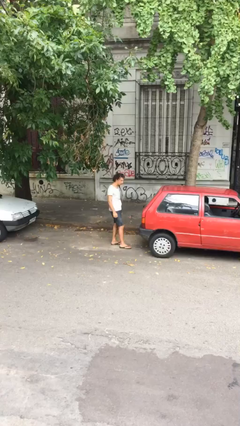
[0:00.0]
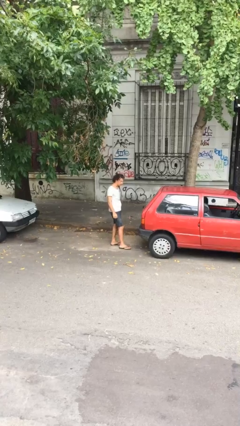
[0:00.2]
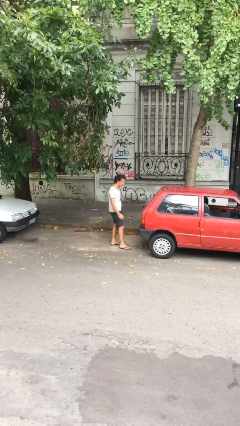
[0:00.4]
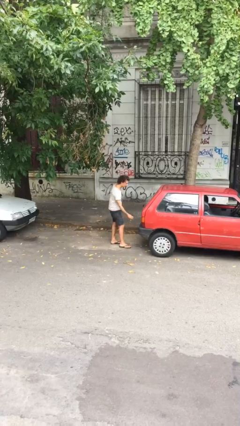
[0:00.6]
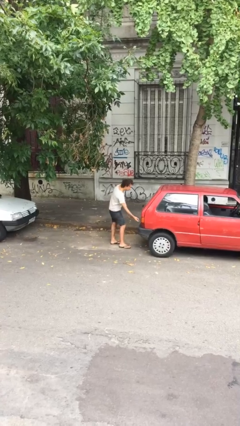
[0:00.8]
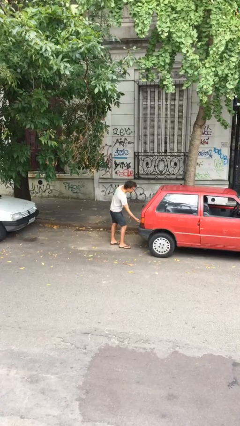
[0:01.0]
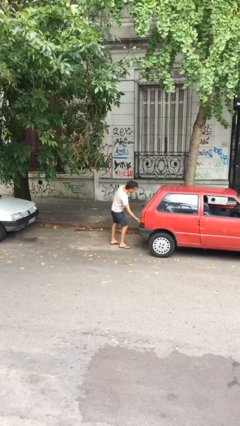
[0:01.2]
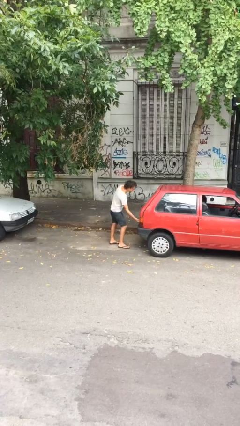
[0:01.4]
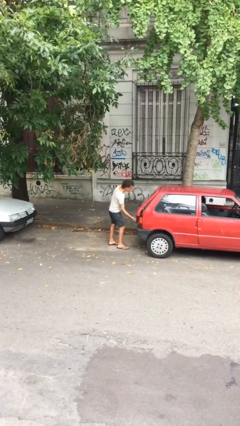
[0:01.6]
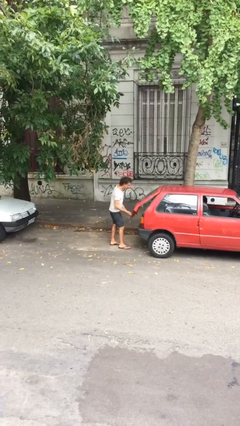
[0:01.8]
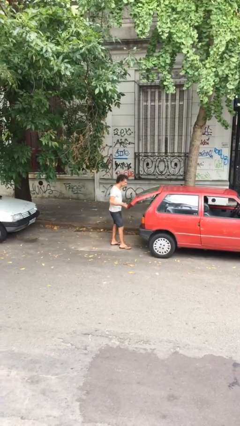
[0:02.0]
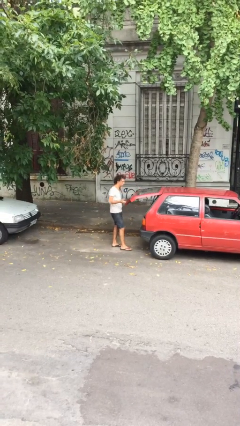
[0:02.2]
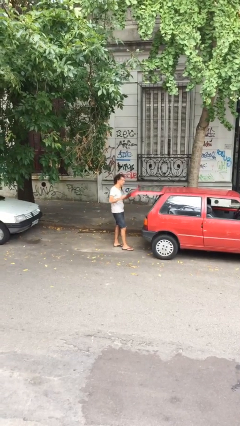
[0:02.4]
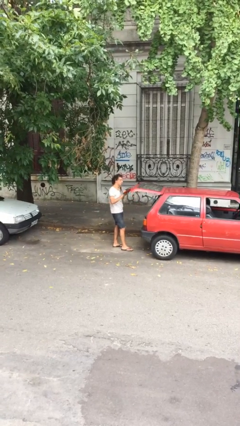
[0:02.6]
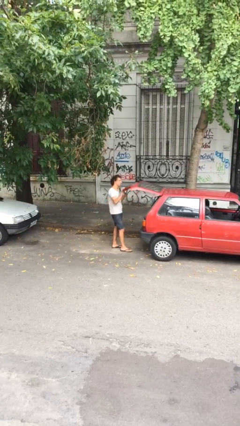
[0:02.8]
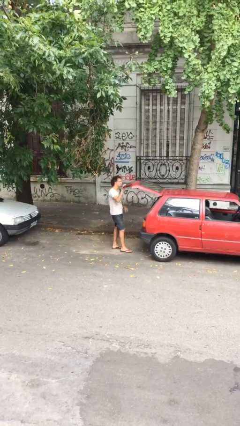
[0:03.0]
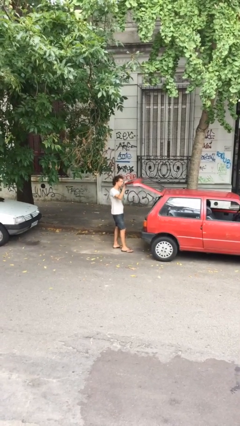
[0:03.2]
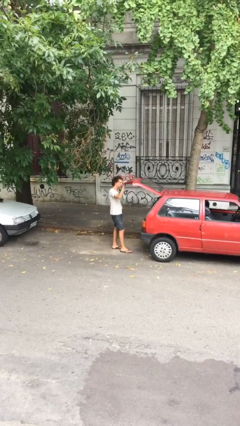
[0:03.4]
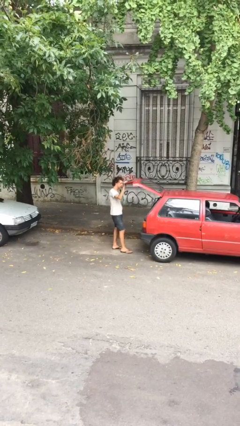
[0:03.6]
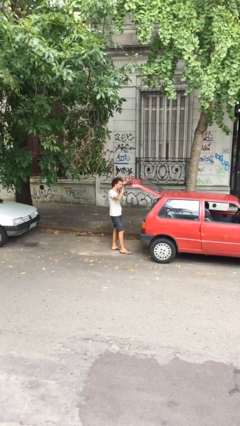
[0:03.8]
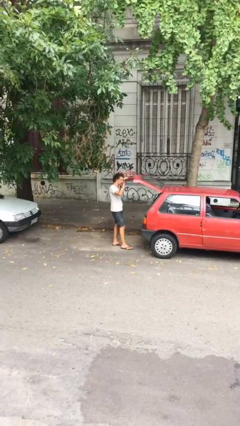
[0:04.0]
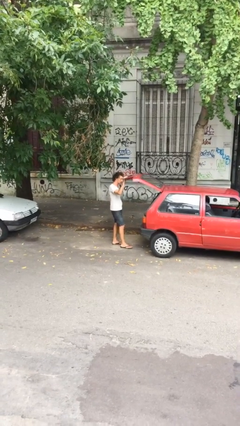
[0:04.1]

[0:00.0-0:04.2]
person opens car trunk

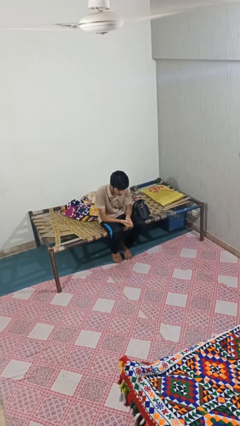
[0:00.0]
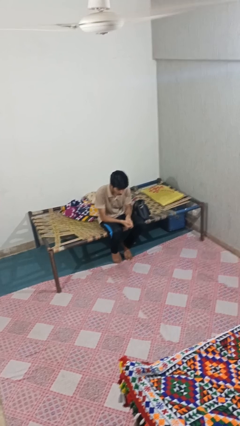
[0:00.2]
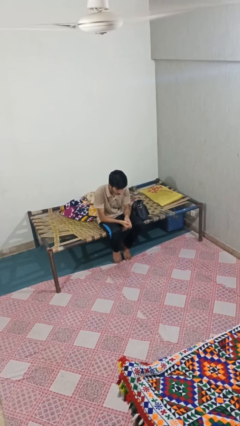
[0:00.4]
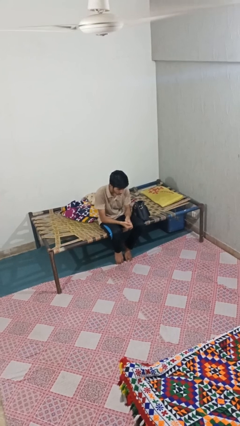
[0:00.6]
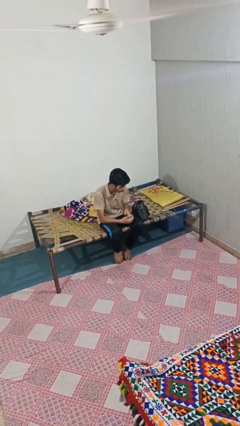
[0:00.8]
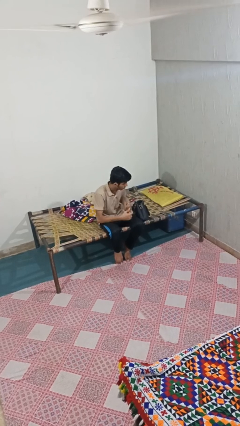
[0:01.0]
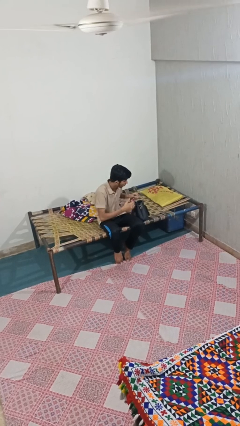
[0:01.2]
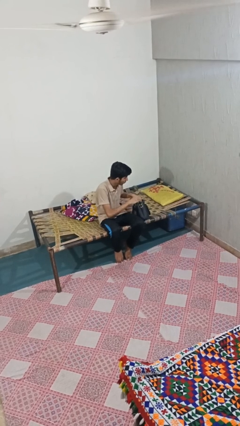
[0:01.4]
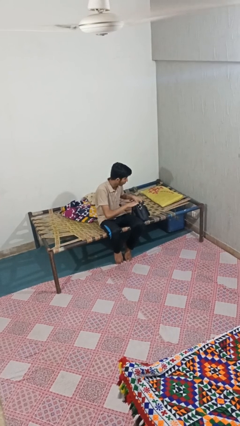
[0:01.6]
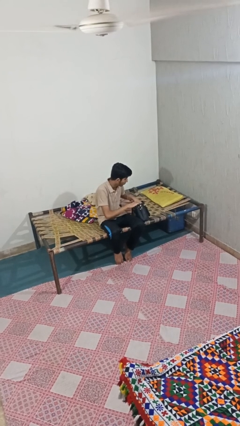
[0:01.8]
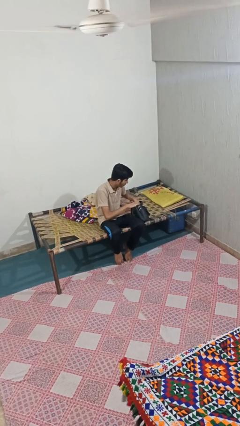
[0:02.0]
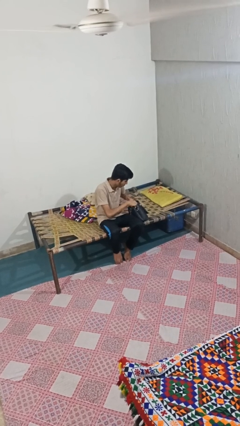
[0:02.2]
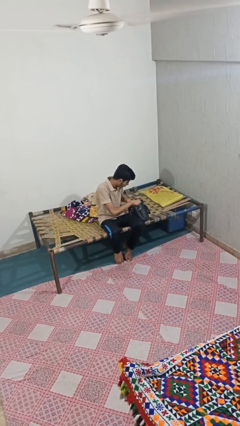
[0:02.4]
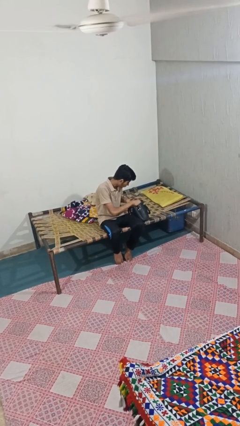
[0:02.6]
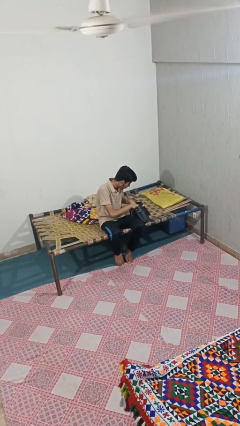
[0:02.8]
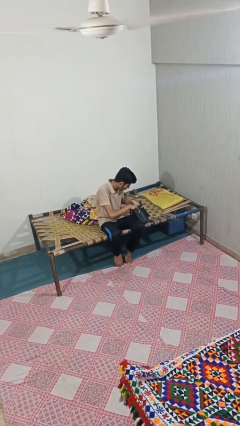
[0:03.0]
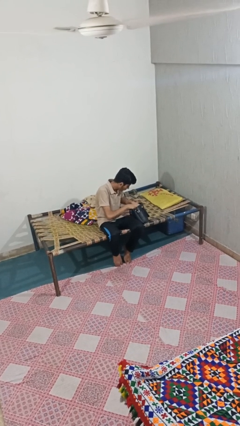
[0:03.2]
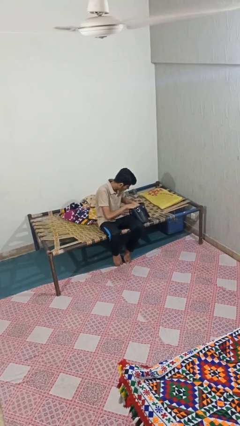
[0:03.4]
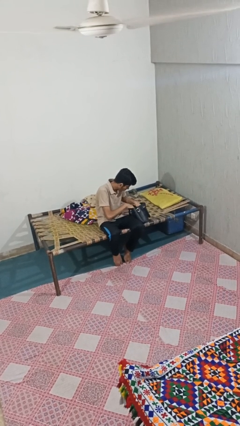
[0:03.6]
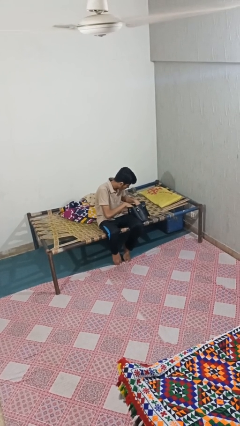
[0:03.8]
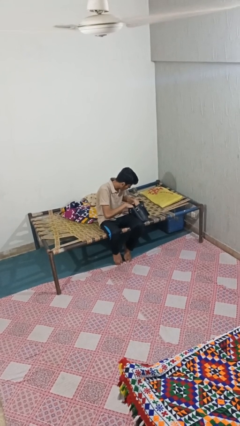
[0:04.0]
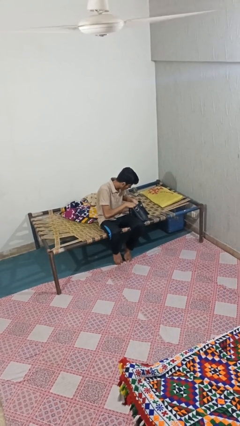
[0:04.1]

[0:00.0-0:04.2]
person searches in purse

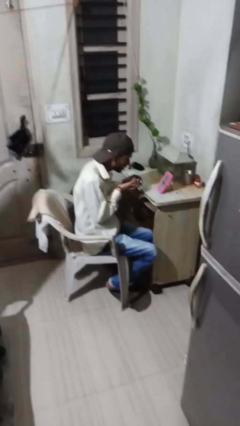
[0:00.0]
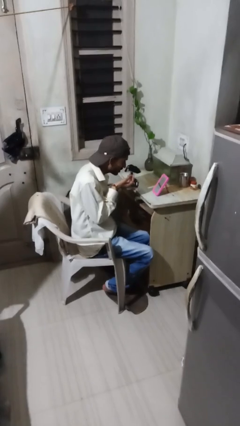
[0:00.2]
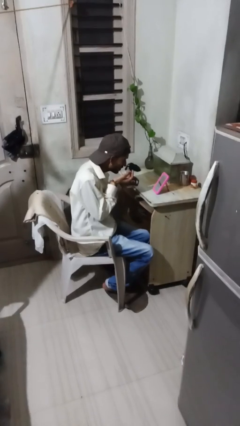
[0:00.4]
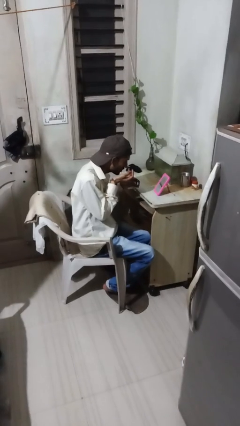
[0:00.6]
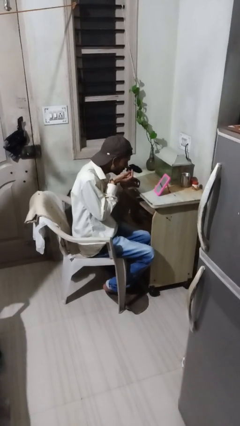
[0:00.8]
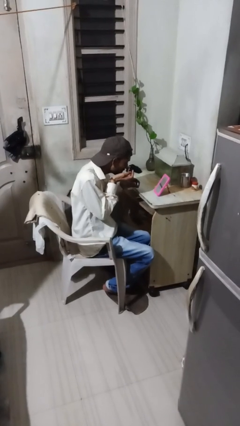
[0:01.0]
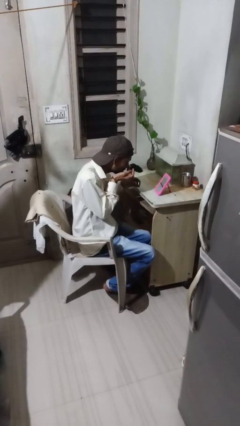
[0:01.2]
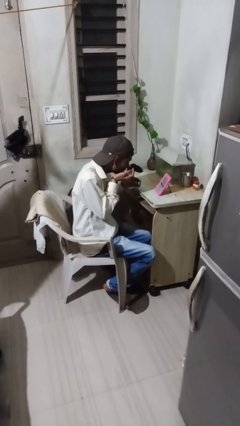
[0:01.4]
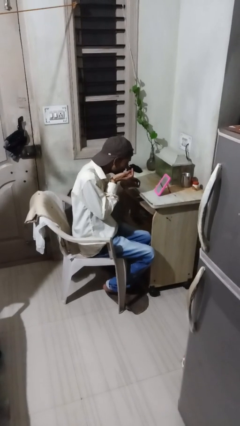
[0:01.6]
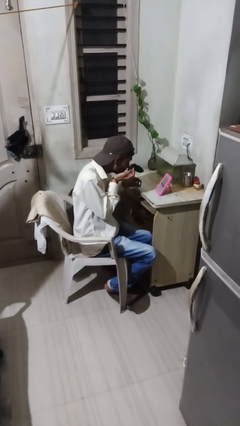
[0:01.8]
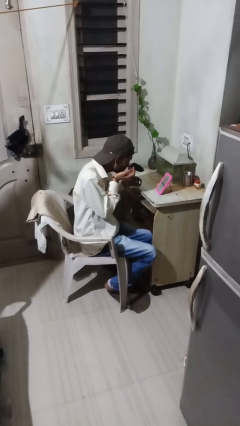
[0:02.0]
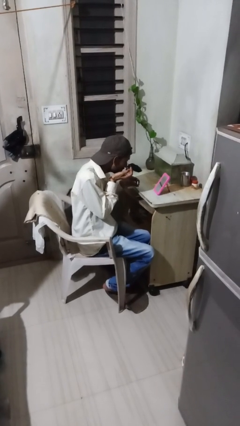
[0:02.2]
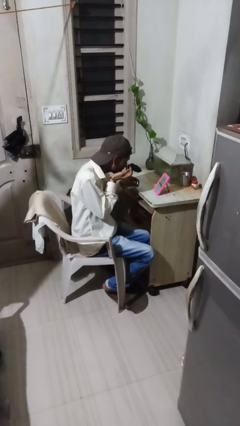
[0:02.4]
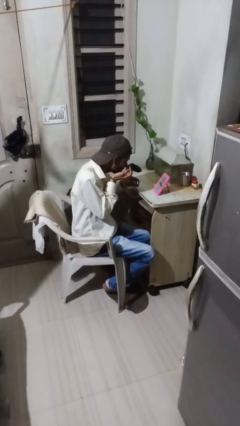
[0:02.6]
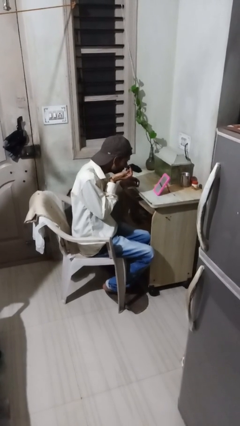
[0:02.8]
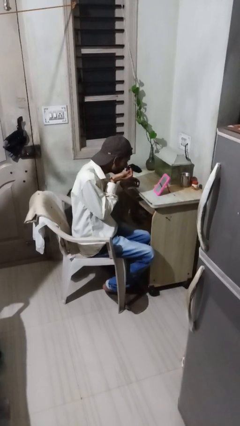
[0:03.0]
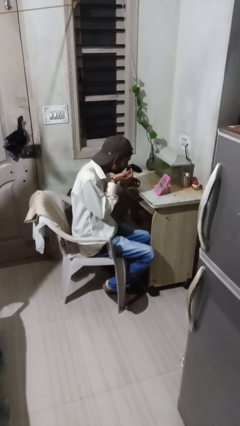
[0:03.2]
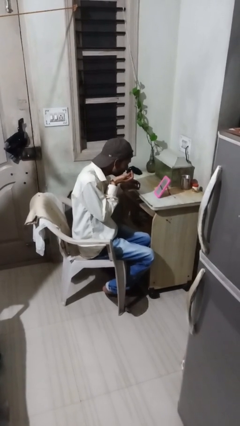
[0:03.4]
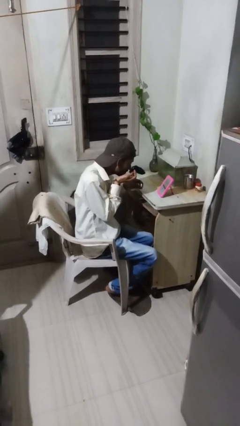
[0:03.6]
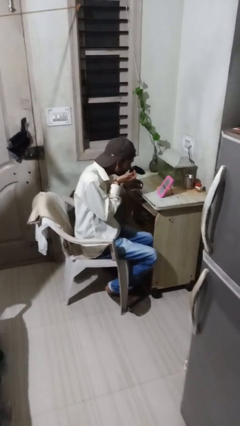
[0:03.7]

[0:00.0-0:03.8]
person applies eye makeup

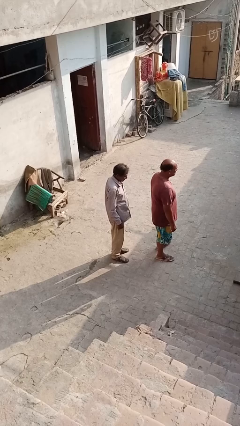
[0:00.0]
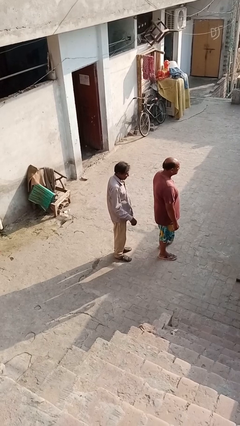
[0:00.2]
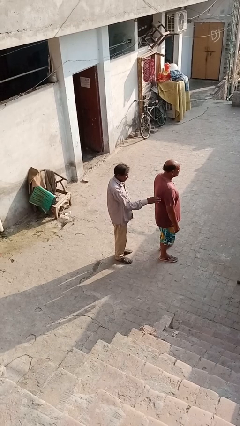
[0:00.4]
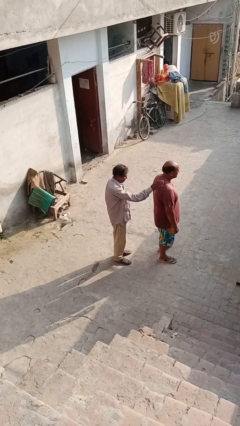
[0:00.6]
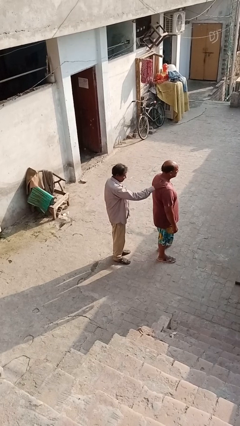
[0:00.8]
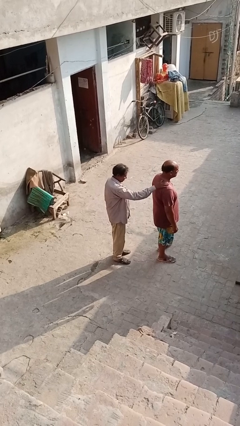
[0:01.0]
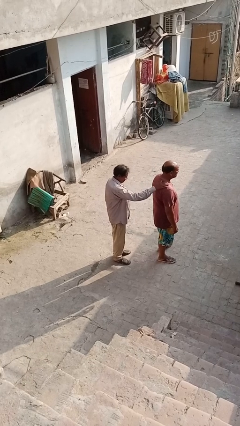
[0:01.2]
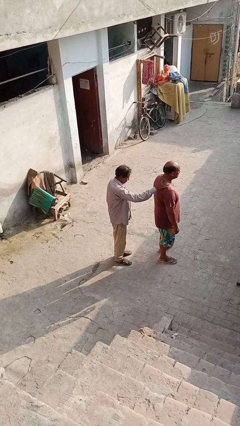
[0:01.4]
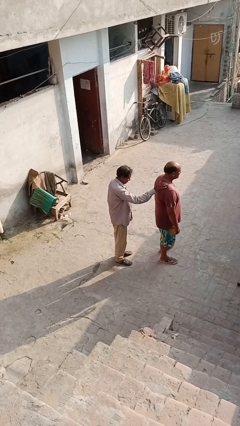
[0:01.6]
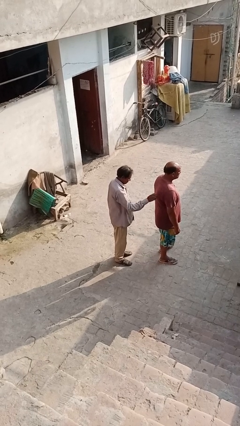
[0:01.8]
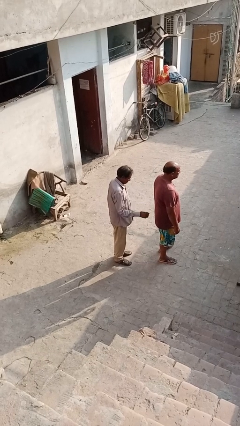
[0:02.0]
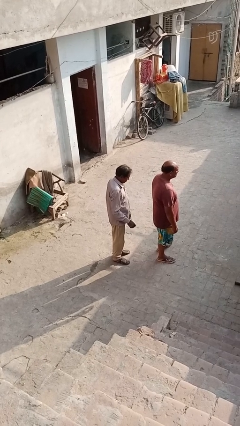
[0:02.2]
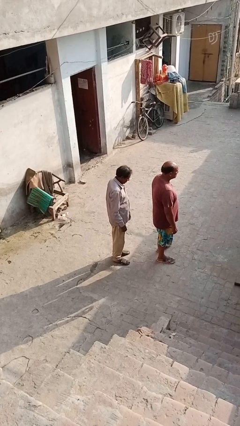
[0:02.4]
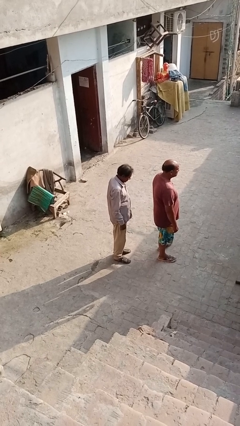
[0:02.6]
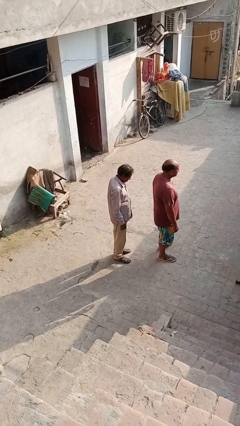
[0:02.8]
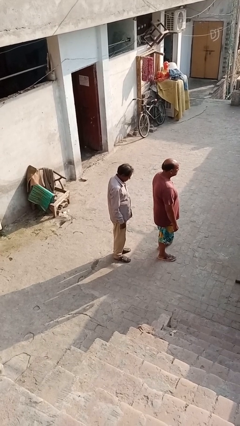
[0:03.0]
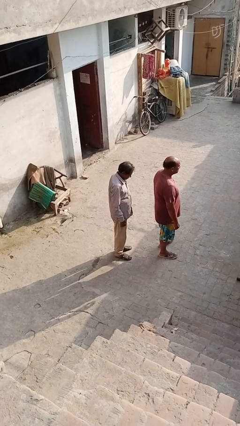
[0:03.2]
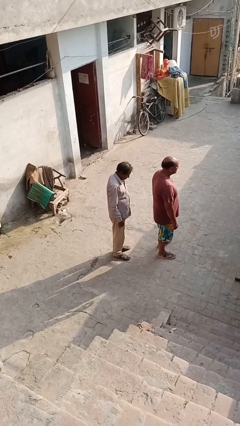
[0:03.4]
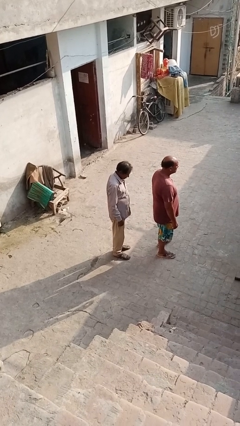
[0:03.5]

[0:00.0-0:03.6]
person touches back of person

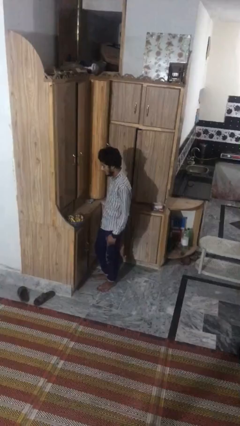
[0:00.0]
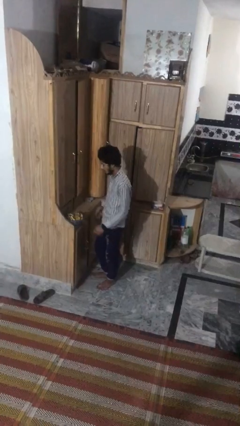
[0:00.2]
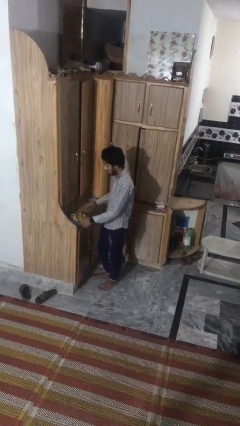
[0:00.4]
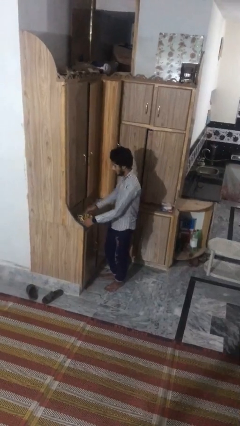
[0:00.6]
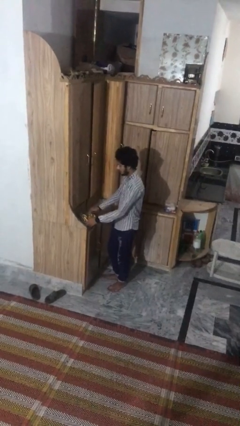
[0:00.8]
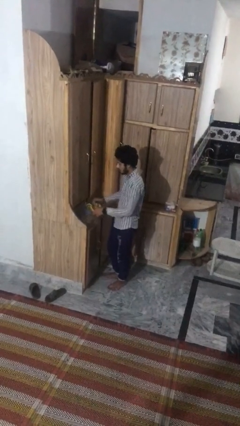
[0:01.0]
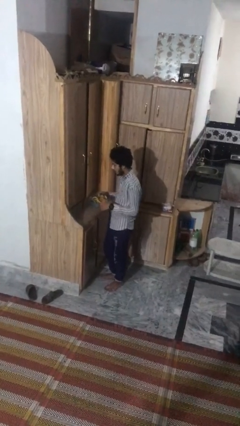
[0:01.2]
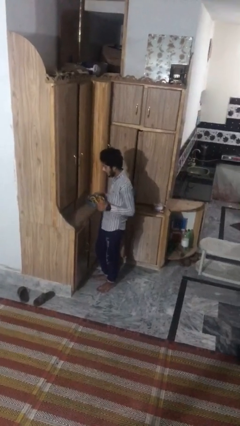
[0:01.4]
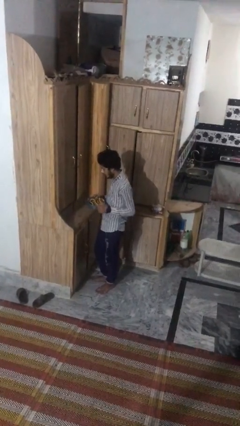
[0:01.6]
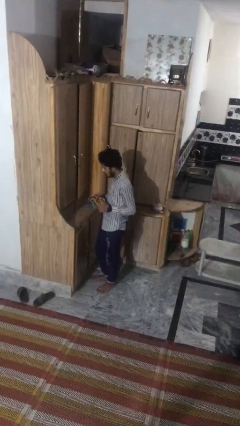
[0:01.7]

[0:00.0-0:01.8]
person picks up object from countertop
